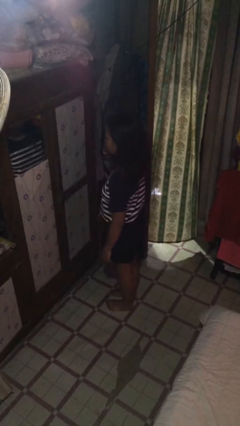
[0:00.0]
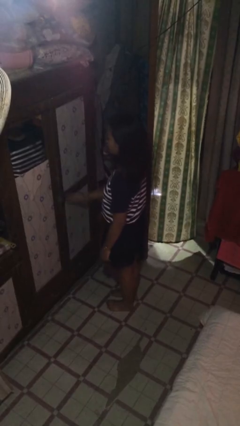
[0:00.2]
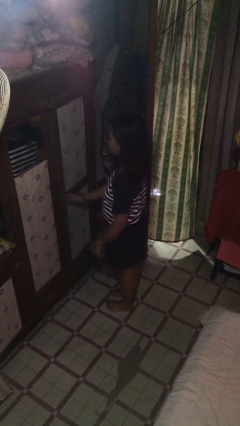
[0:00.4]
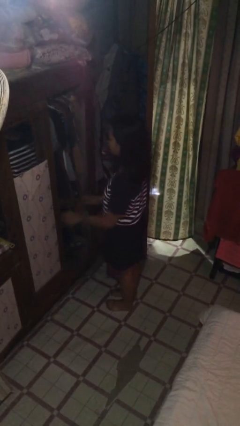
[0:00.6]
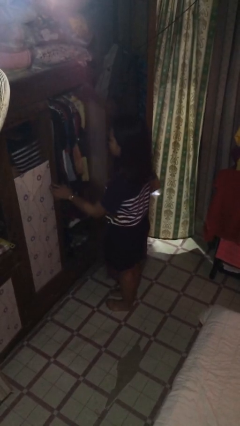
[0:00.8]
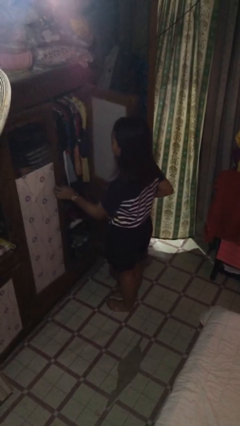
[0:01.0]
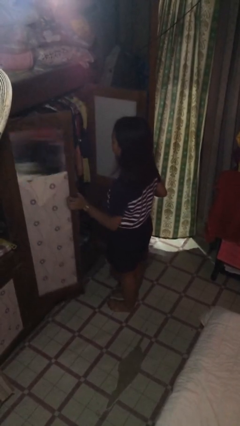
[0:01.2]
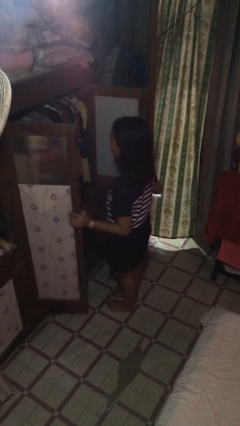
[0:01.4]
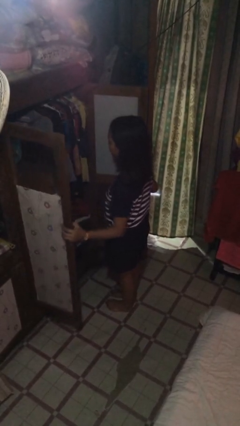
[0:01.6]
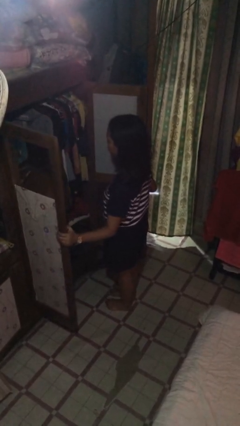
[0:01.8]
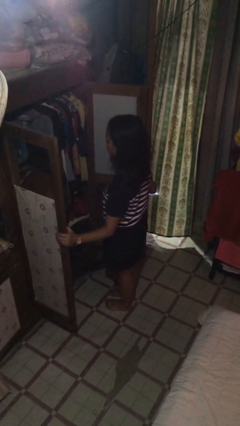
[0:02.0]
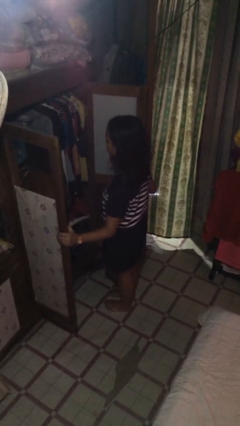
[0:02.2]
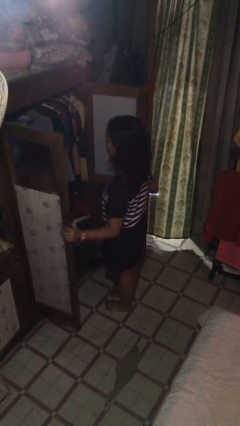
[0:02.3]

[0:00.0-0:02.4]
person opens closet door

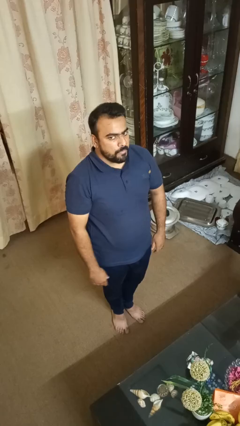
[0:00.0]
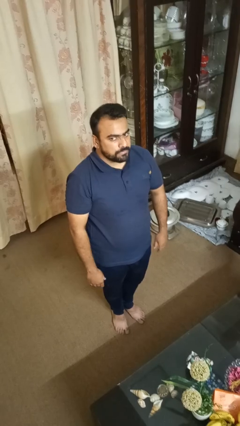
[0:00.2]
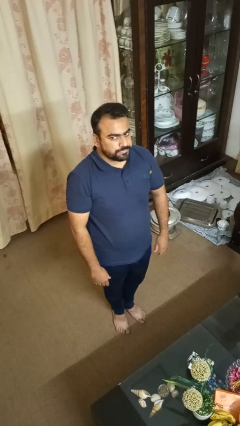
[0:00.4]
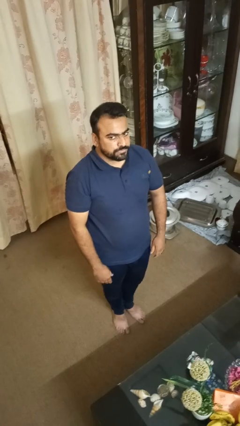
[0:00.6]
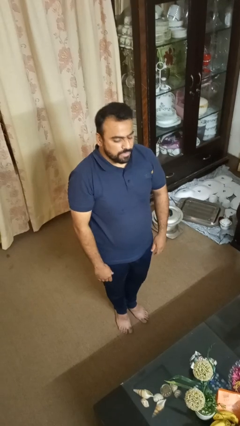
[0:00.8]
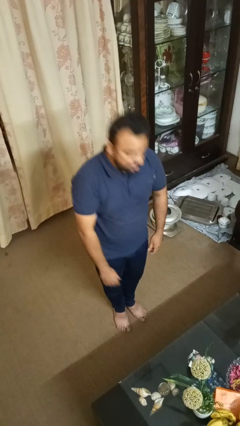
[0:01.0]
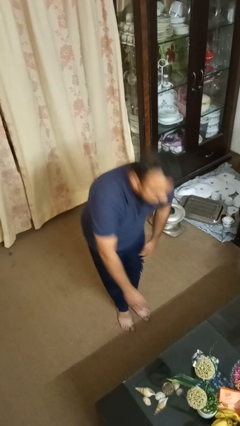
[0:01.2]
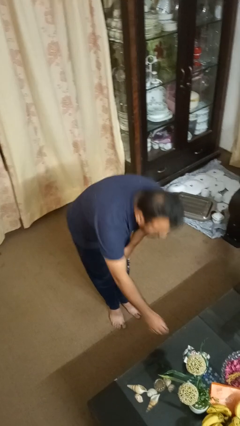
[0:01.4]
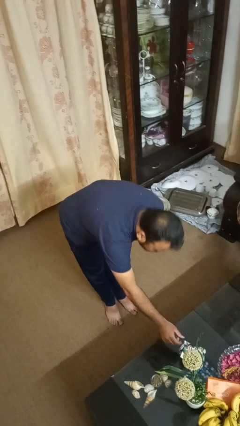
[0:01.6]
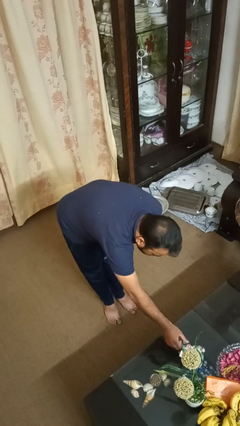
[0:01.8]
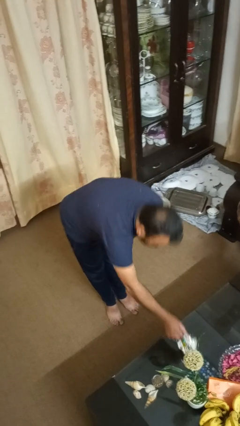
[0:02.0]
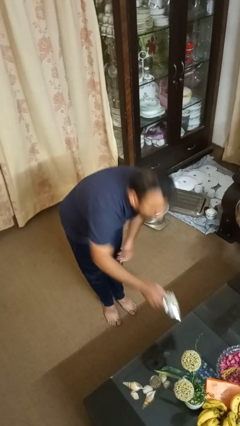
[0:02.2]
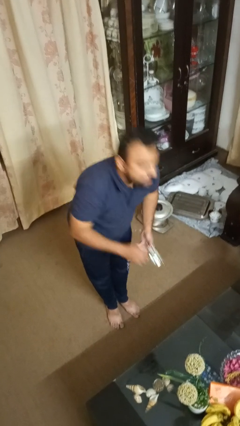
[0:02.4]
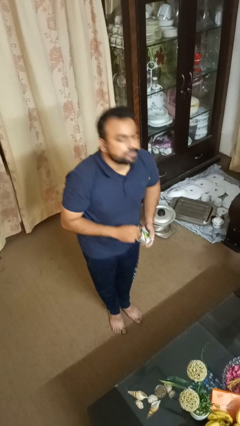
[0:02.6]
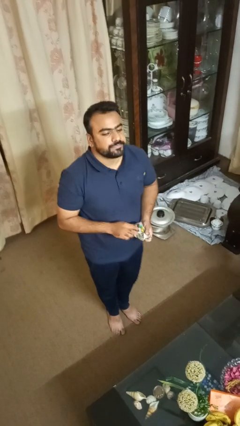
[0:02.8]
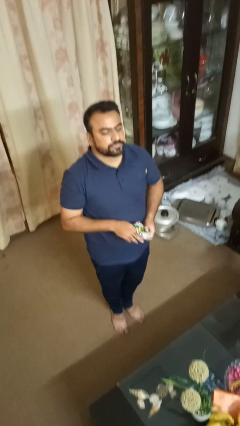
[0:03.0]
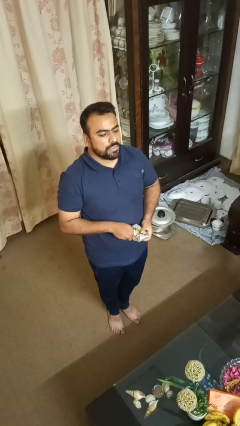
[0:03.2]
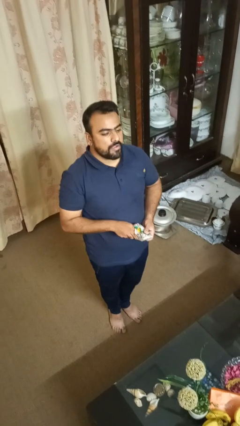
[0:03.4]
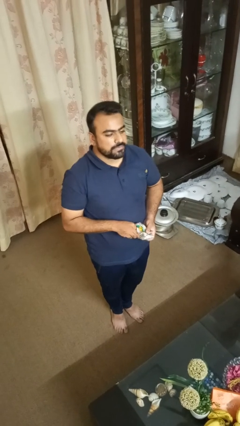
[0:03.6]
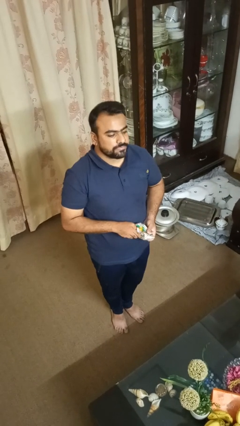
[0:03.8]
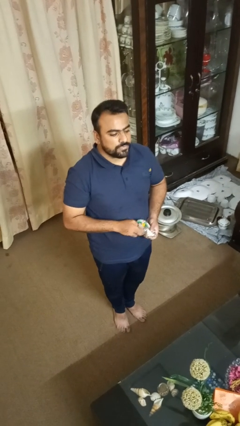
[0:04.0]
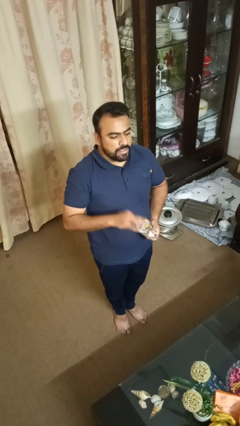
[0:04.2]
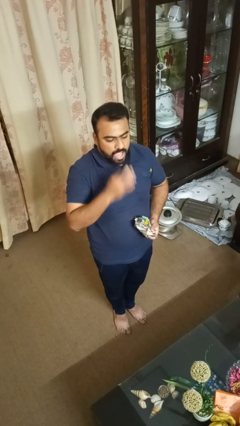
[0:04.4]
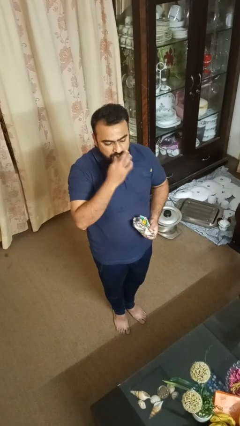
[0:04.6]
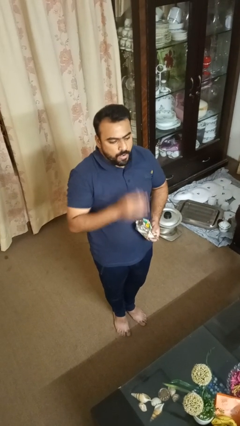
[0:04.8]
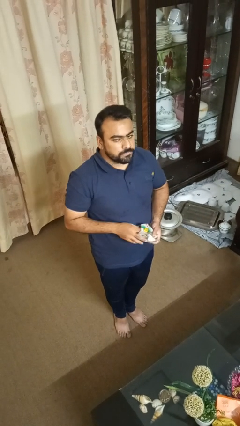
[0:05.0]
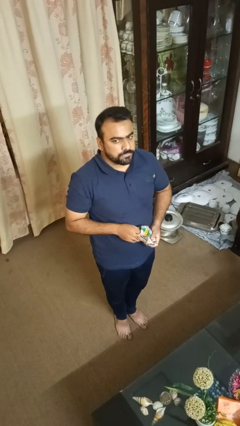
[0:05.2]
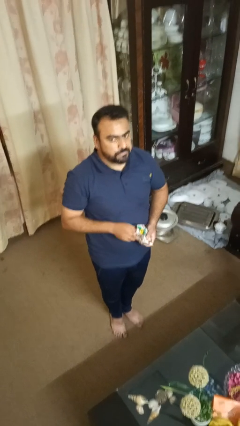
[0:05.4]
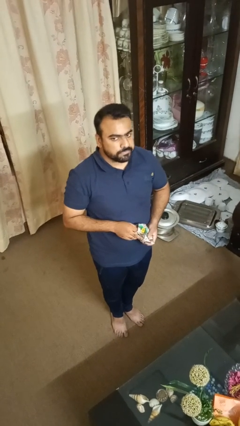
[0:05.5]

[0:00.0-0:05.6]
person eats snack from bag

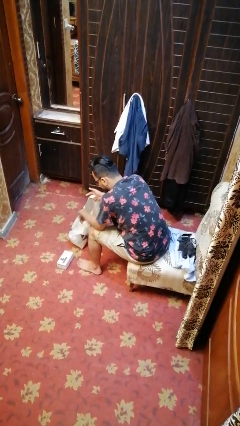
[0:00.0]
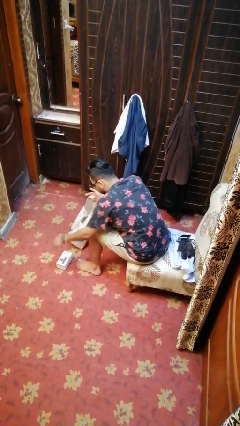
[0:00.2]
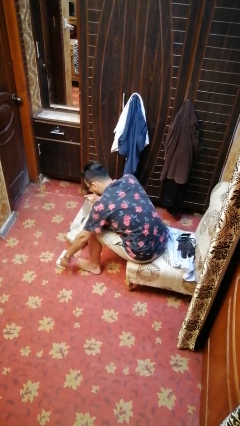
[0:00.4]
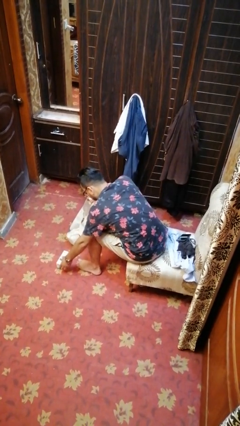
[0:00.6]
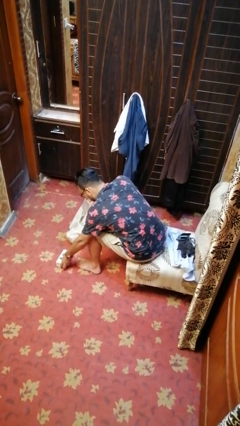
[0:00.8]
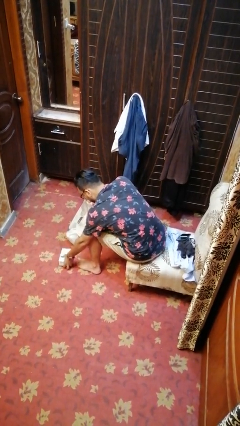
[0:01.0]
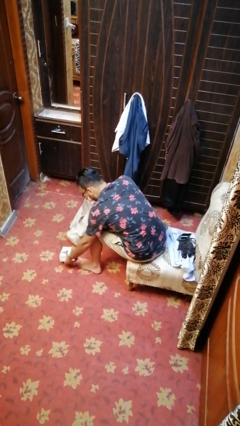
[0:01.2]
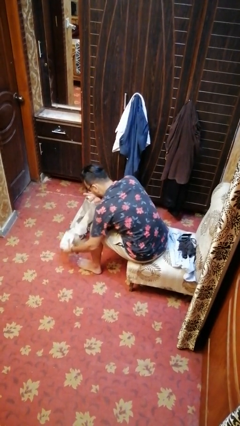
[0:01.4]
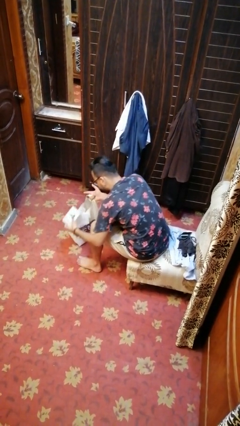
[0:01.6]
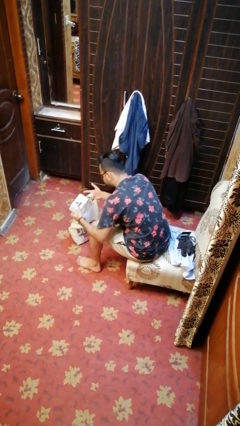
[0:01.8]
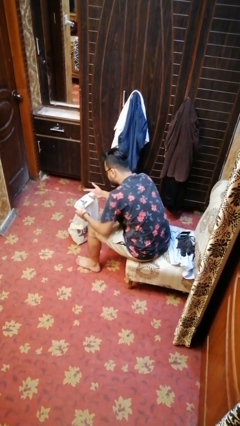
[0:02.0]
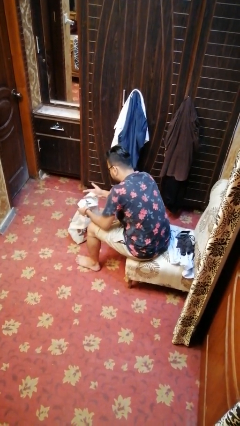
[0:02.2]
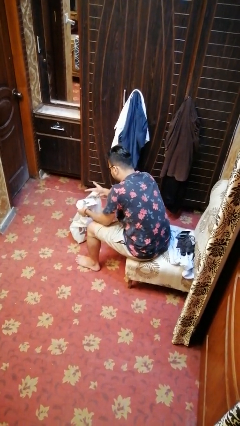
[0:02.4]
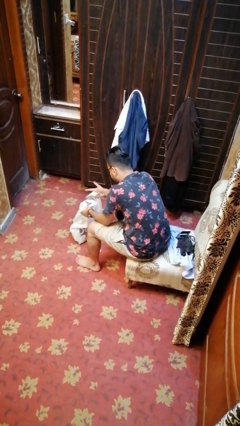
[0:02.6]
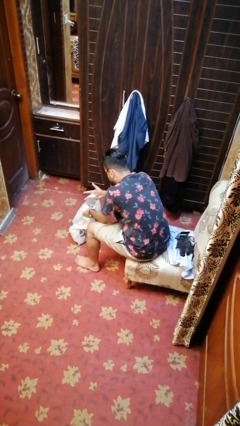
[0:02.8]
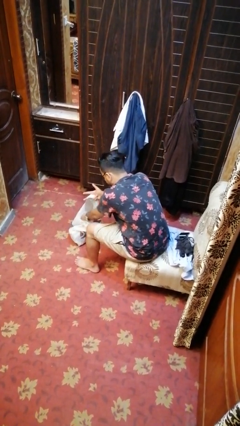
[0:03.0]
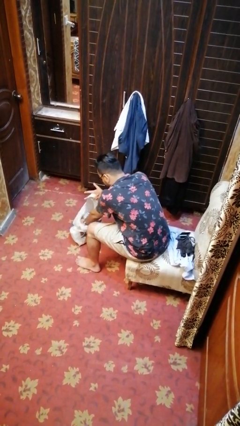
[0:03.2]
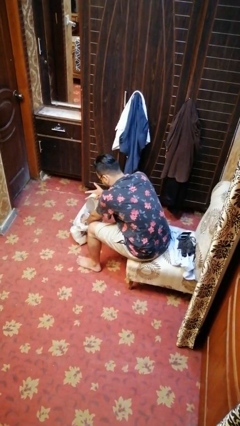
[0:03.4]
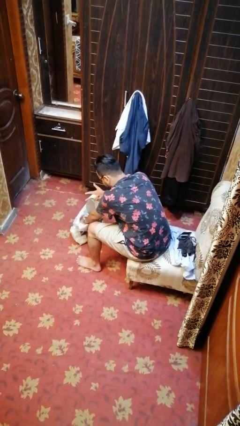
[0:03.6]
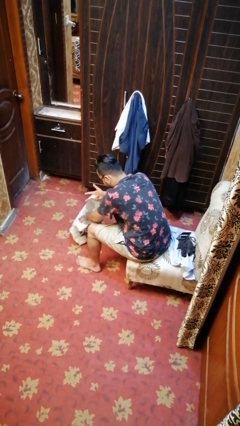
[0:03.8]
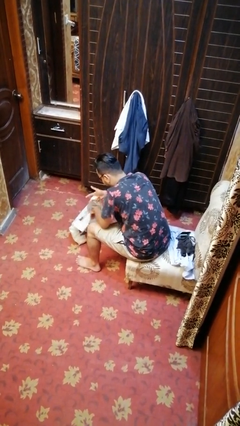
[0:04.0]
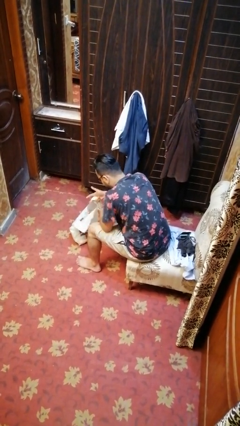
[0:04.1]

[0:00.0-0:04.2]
person puts object into bag

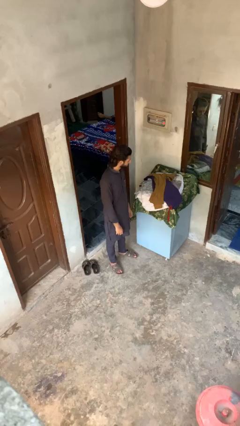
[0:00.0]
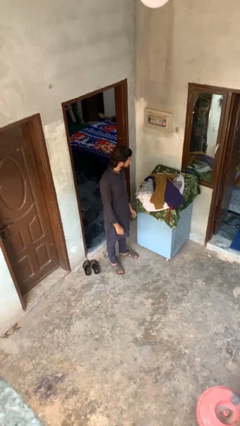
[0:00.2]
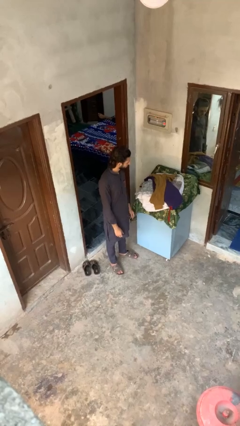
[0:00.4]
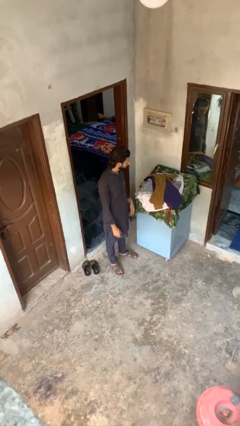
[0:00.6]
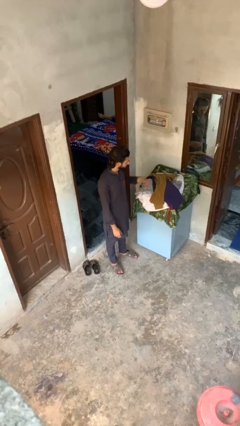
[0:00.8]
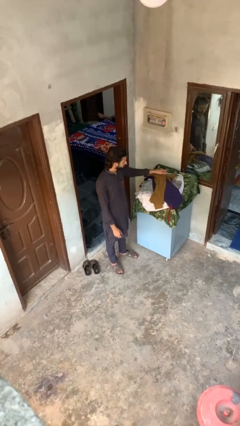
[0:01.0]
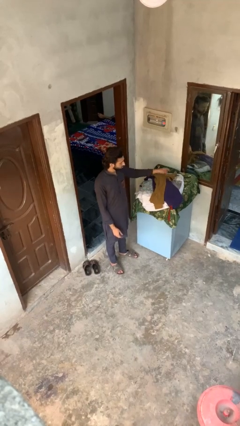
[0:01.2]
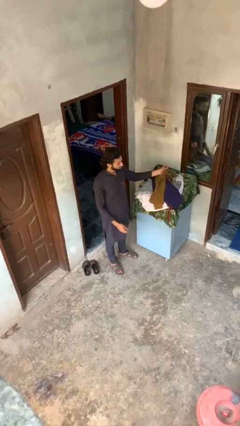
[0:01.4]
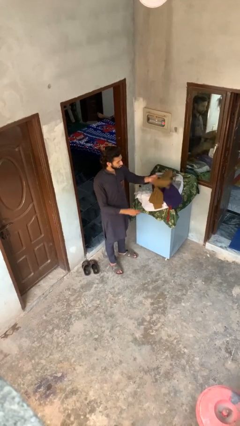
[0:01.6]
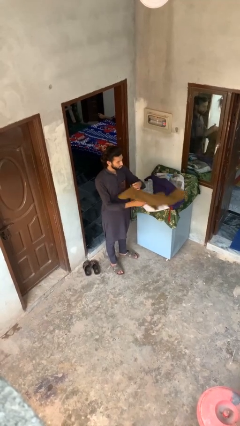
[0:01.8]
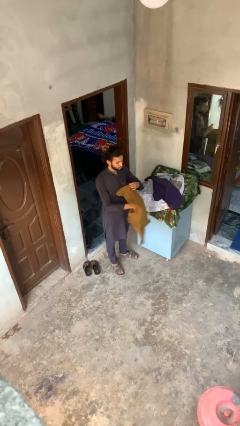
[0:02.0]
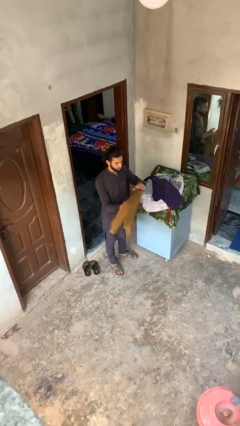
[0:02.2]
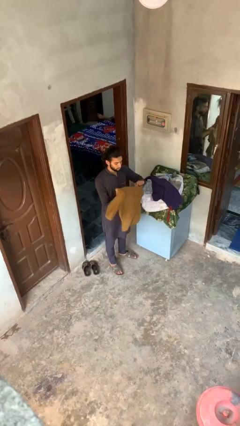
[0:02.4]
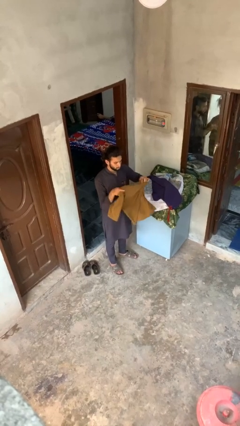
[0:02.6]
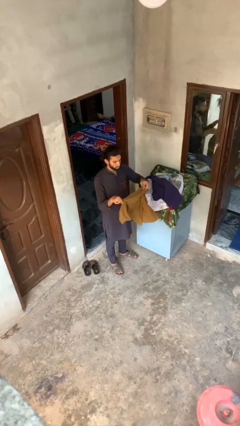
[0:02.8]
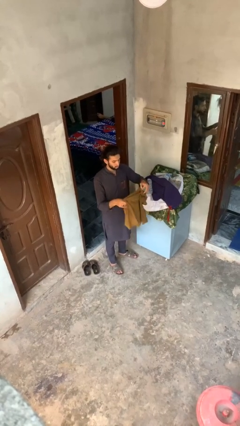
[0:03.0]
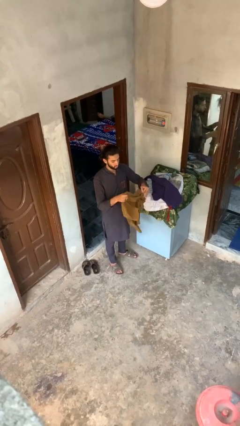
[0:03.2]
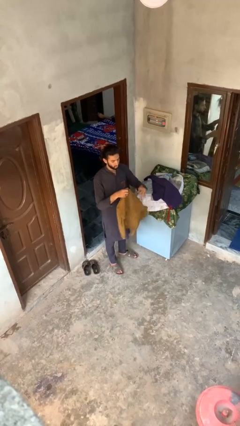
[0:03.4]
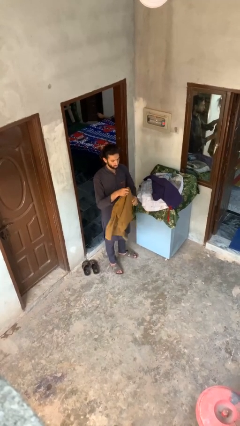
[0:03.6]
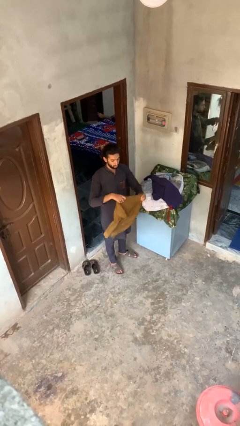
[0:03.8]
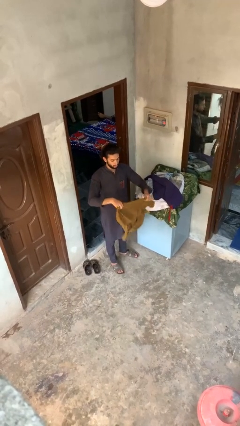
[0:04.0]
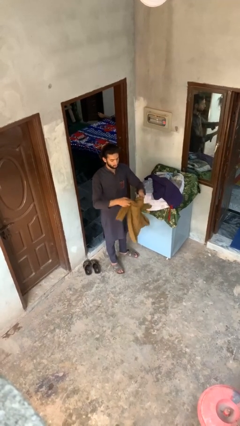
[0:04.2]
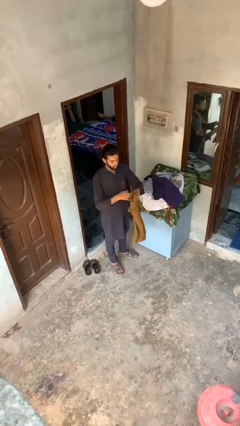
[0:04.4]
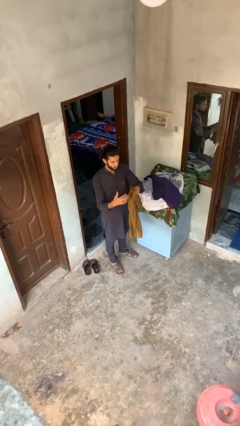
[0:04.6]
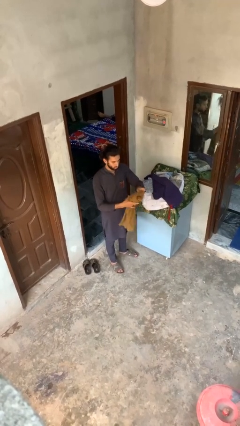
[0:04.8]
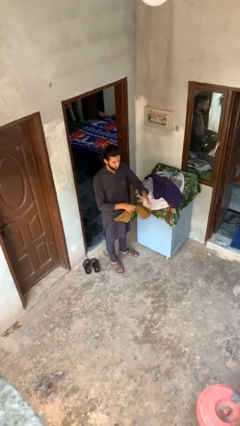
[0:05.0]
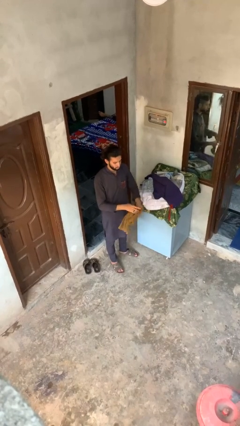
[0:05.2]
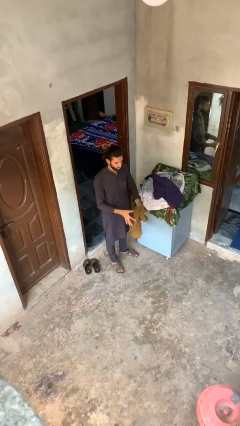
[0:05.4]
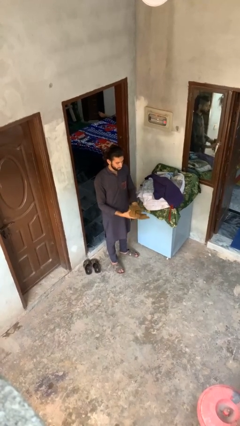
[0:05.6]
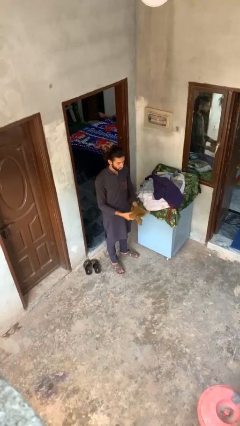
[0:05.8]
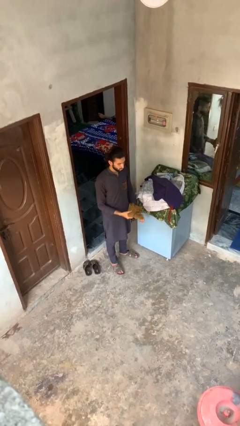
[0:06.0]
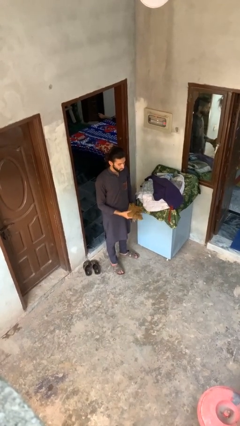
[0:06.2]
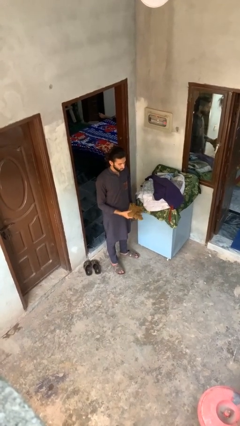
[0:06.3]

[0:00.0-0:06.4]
person folds shirt
